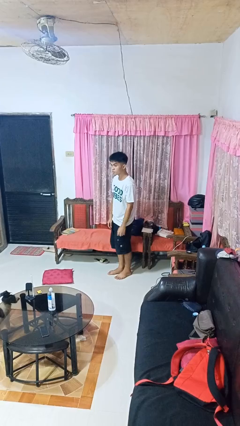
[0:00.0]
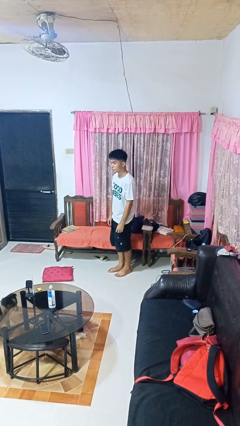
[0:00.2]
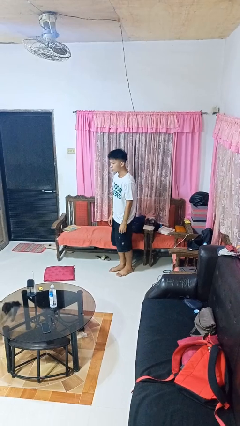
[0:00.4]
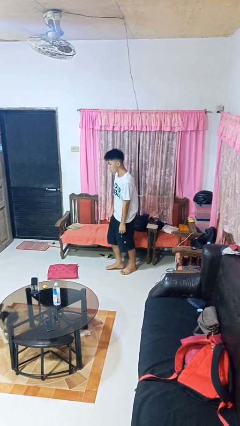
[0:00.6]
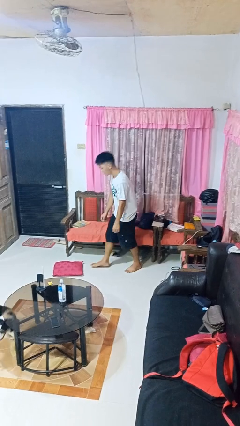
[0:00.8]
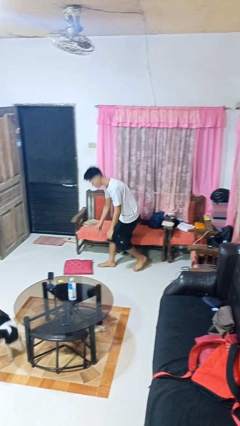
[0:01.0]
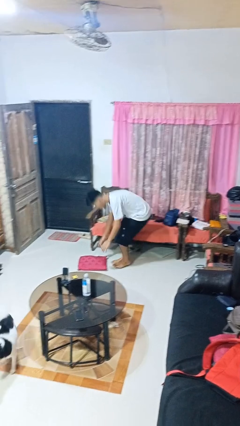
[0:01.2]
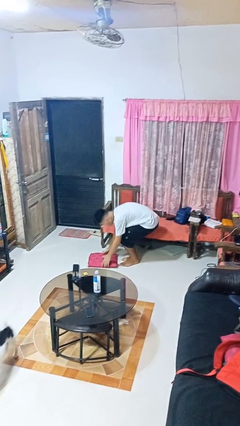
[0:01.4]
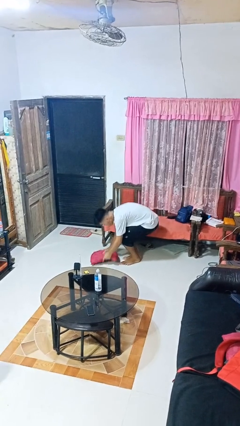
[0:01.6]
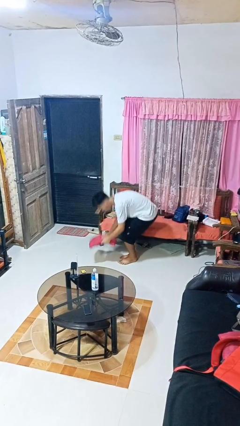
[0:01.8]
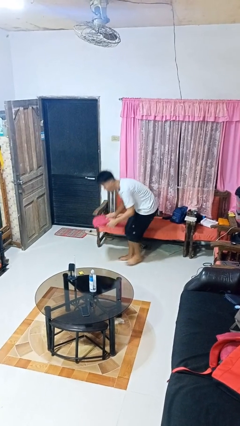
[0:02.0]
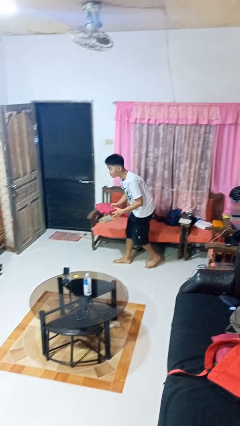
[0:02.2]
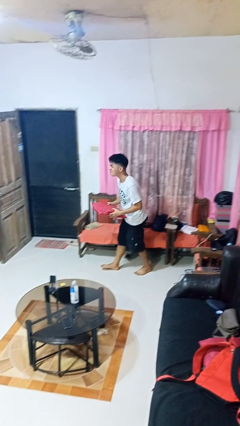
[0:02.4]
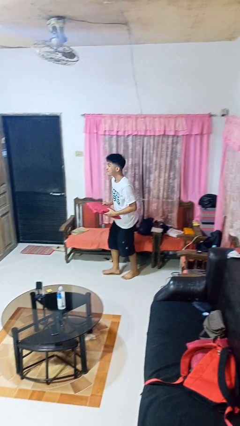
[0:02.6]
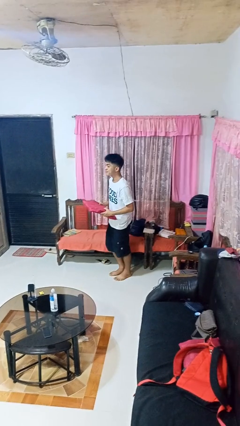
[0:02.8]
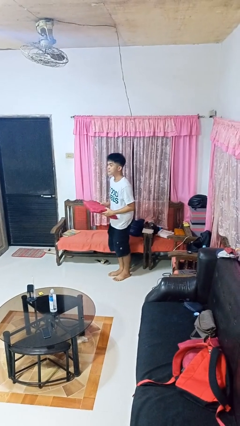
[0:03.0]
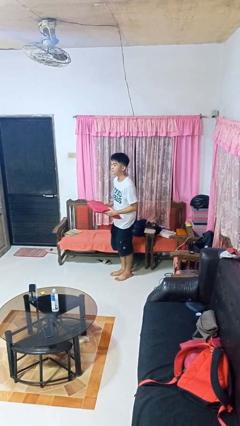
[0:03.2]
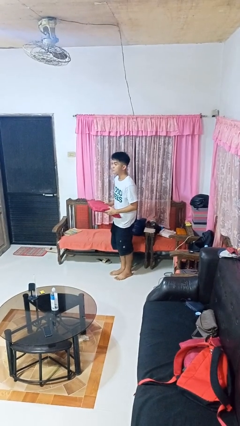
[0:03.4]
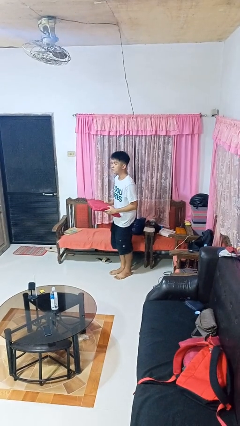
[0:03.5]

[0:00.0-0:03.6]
person picks up object from floor

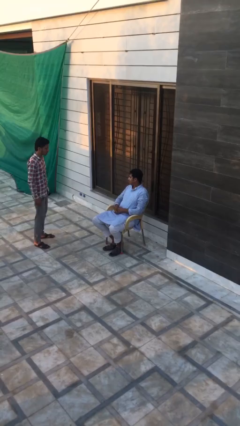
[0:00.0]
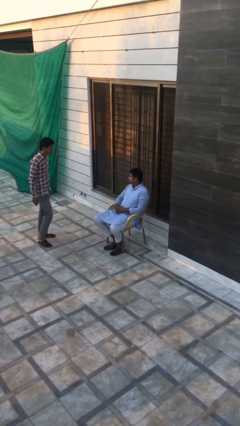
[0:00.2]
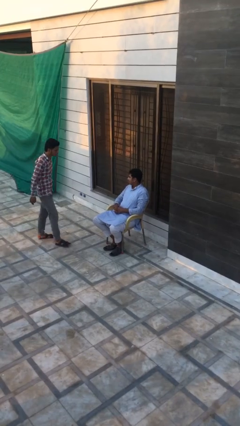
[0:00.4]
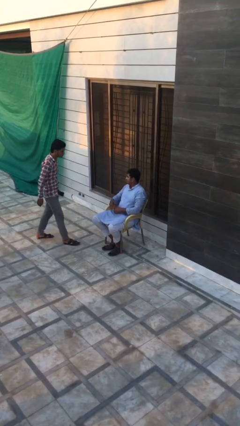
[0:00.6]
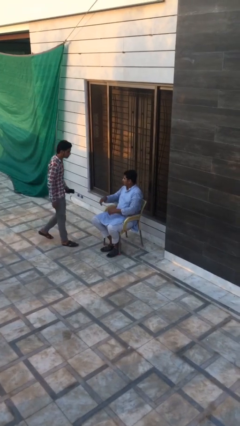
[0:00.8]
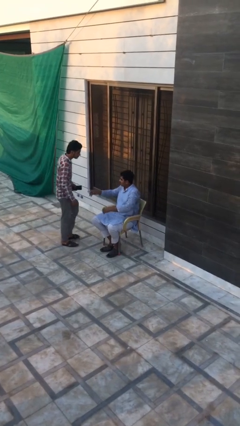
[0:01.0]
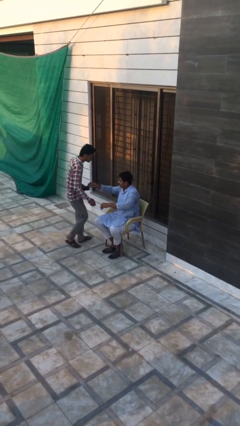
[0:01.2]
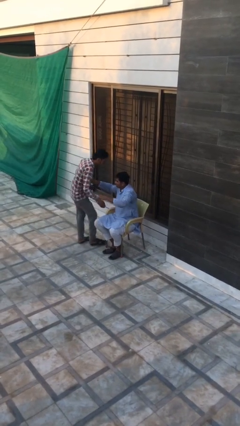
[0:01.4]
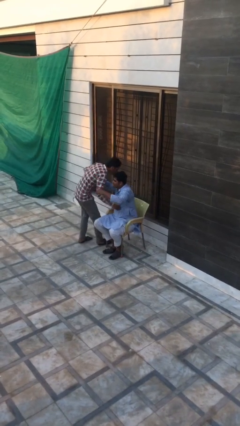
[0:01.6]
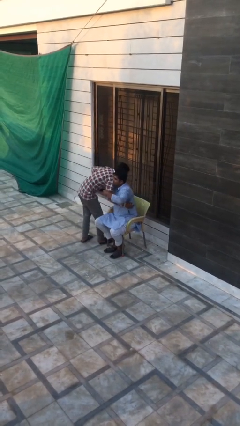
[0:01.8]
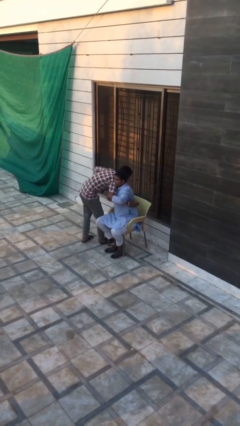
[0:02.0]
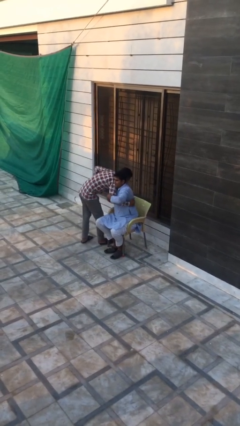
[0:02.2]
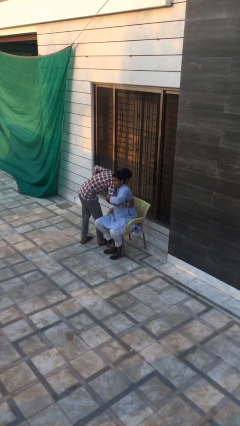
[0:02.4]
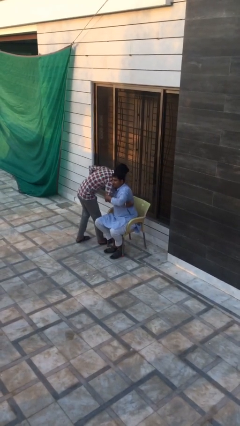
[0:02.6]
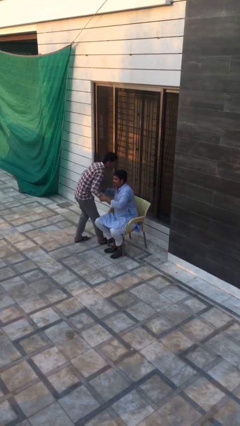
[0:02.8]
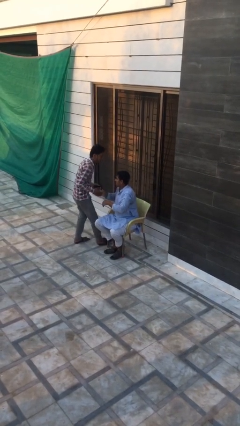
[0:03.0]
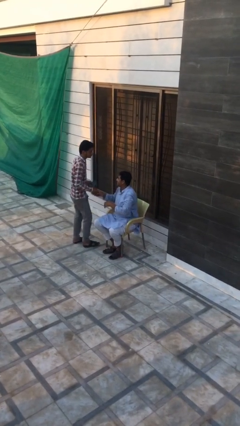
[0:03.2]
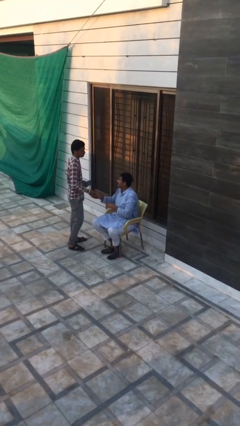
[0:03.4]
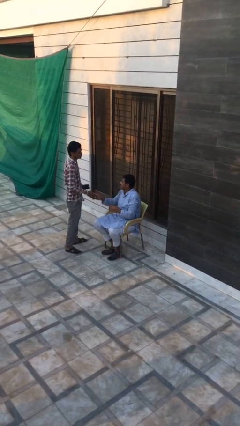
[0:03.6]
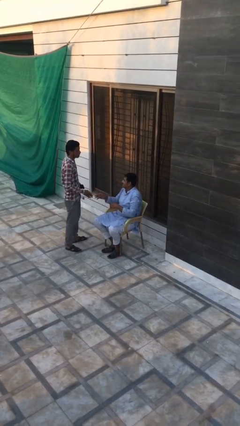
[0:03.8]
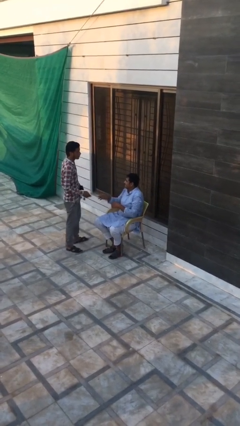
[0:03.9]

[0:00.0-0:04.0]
person embraces person

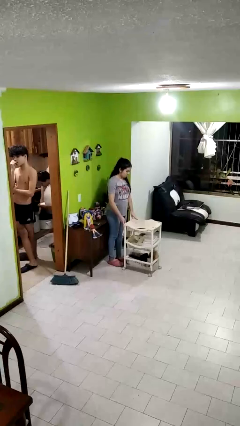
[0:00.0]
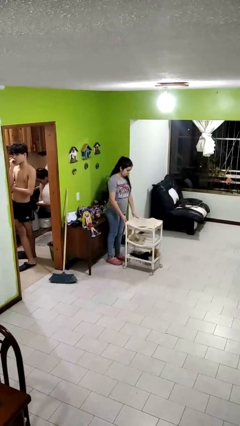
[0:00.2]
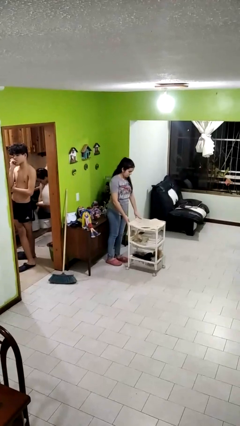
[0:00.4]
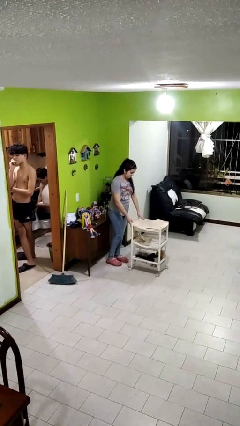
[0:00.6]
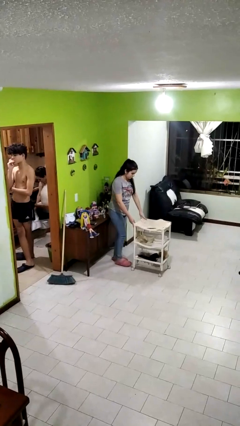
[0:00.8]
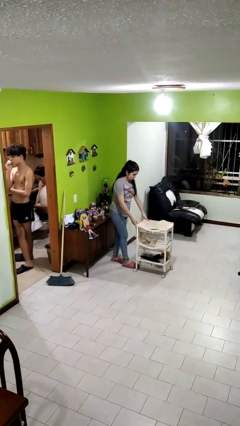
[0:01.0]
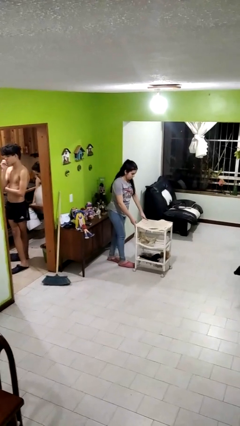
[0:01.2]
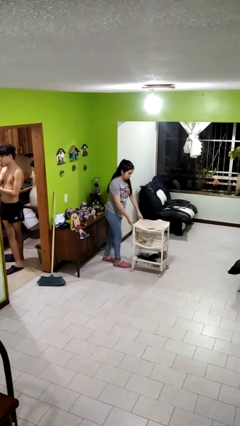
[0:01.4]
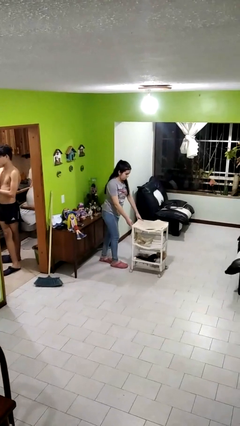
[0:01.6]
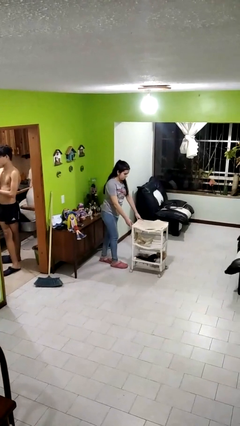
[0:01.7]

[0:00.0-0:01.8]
person pushes wheeled cart

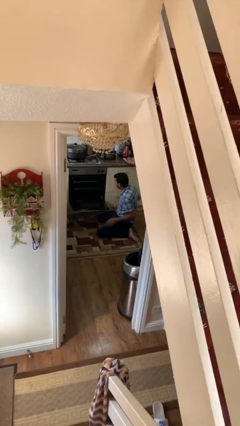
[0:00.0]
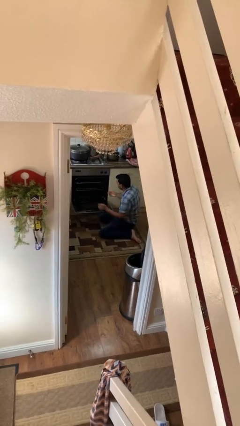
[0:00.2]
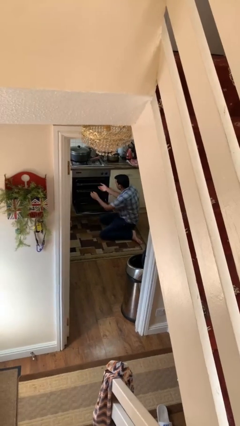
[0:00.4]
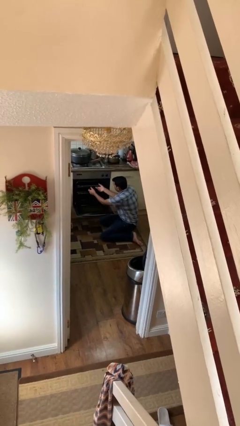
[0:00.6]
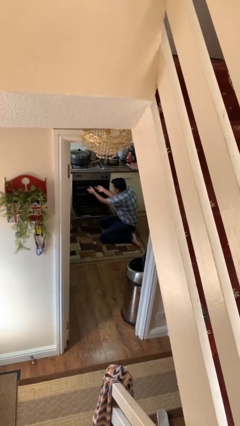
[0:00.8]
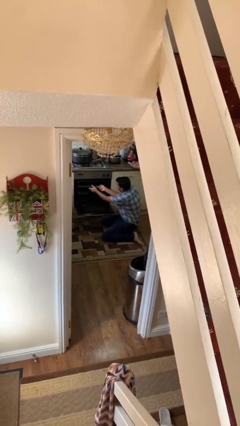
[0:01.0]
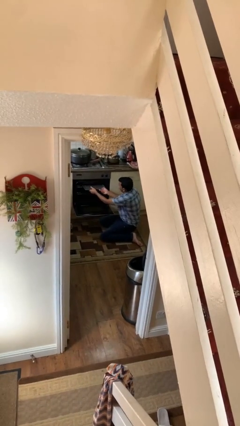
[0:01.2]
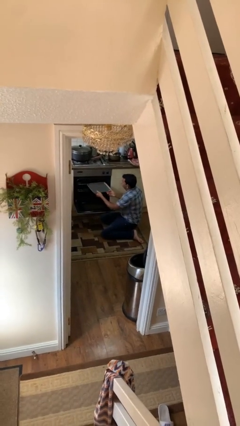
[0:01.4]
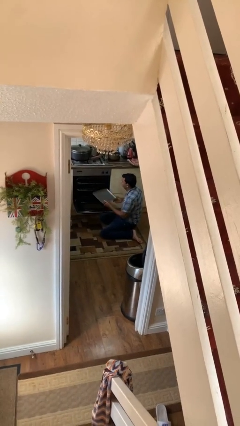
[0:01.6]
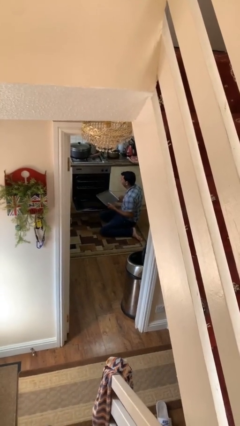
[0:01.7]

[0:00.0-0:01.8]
person takes object from oven

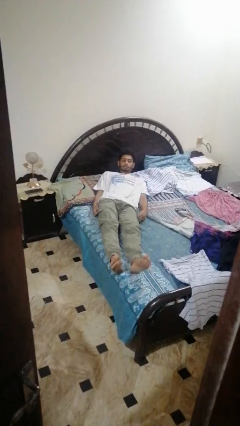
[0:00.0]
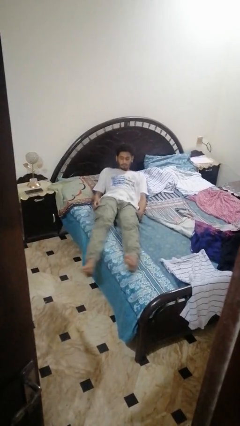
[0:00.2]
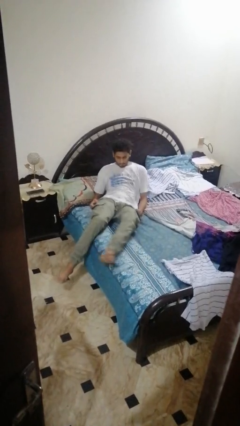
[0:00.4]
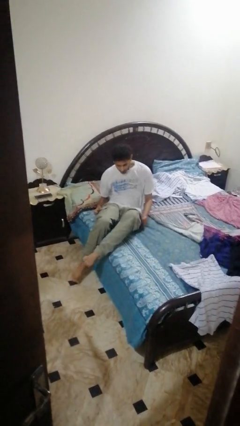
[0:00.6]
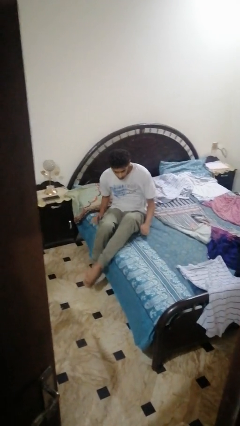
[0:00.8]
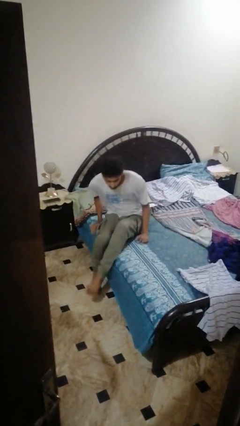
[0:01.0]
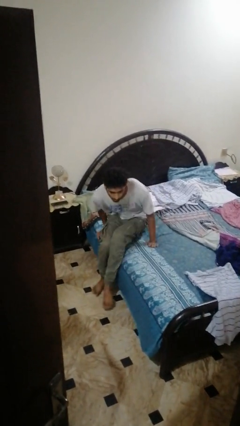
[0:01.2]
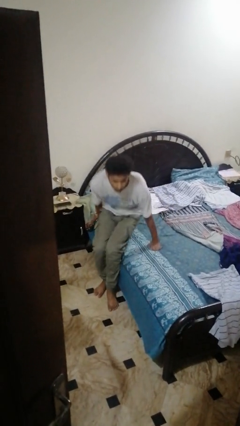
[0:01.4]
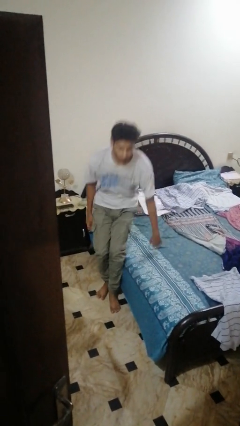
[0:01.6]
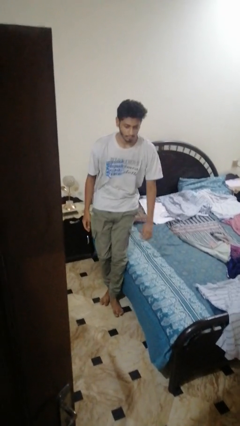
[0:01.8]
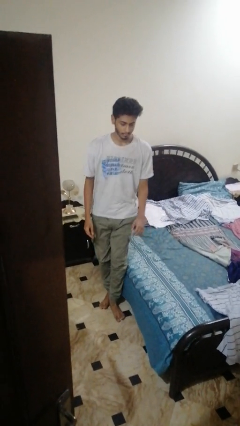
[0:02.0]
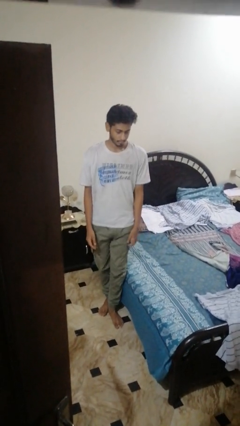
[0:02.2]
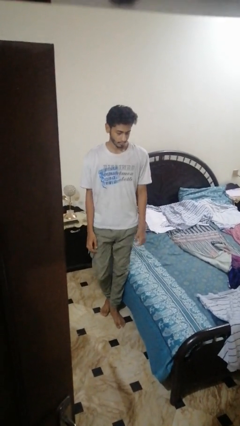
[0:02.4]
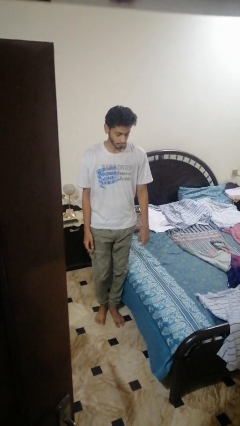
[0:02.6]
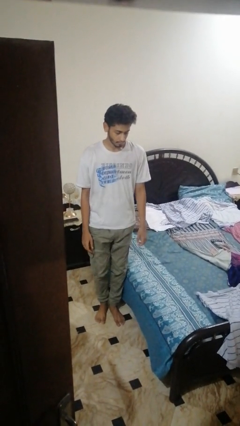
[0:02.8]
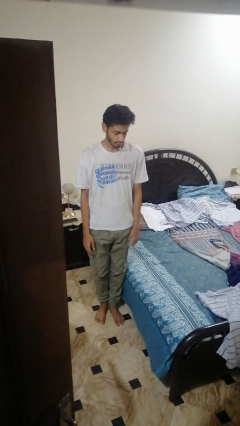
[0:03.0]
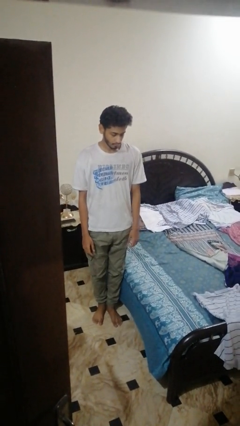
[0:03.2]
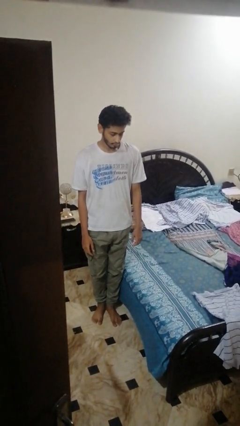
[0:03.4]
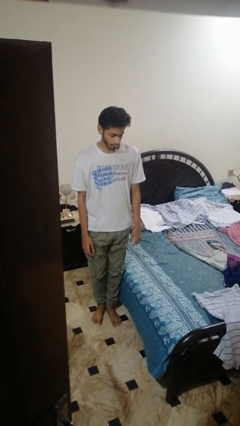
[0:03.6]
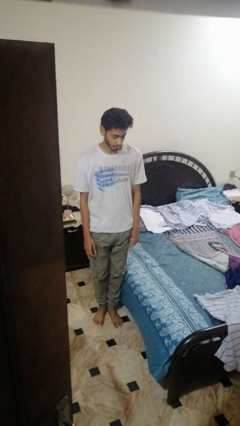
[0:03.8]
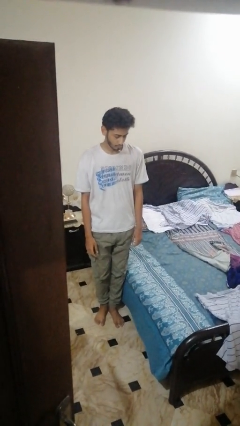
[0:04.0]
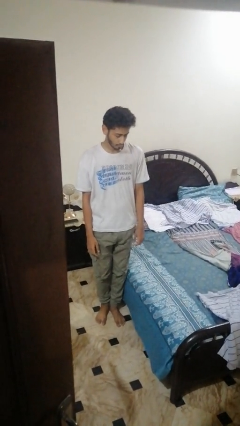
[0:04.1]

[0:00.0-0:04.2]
person stands up

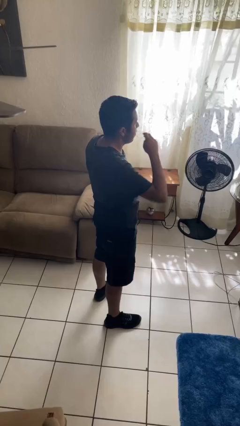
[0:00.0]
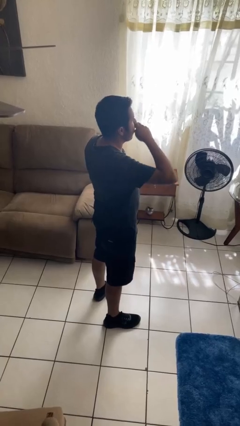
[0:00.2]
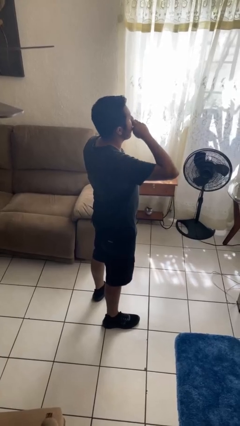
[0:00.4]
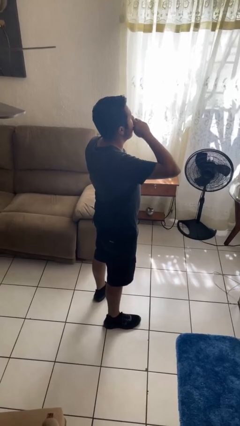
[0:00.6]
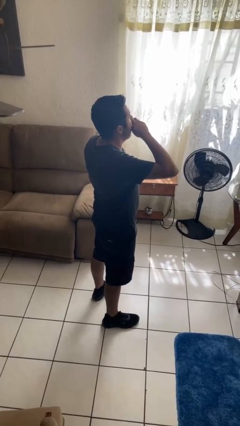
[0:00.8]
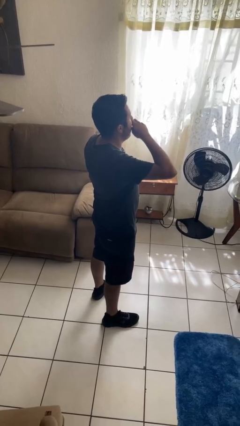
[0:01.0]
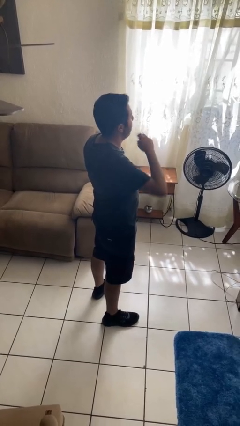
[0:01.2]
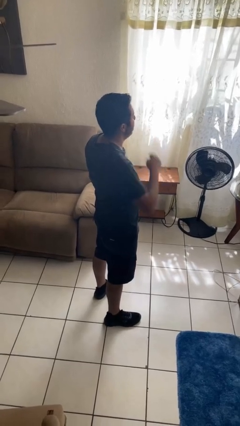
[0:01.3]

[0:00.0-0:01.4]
person yawns

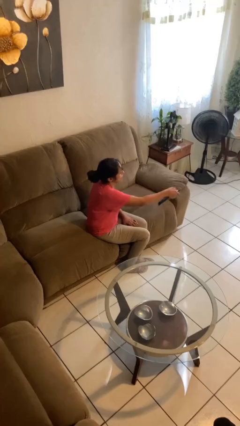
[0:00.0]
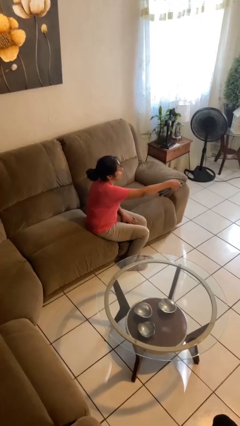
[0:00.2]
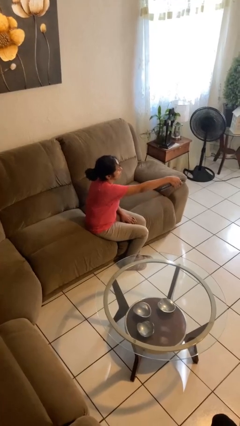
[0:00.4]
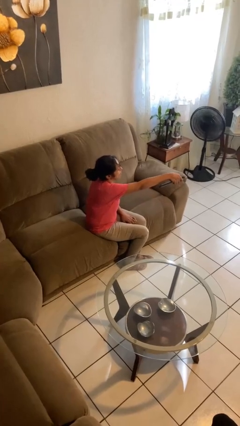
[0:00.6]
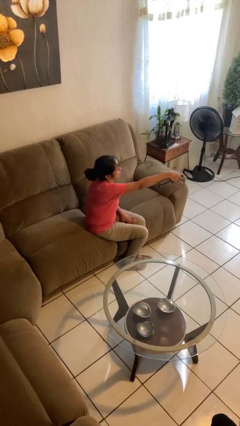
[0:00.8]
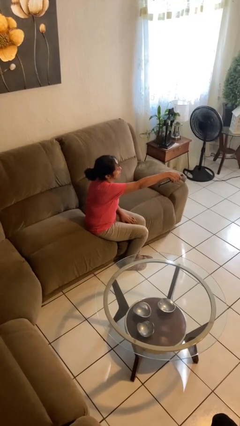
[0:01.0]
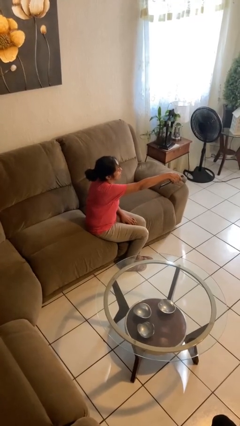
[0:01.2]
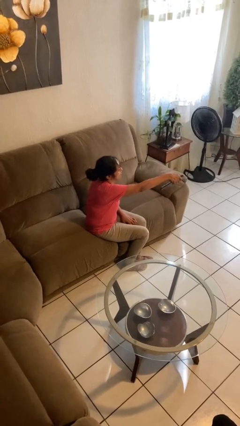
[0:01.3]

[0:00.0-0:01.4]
person uses television remote
